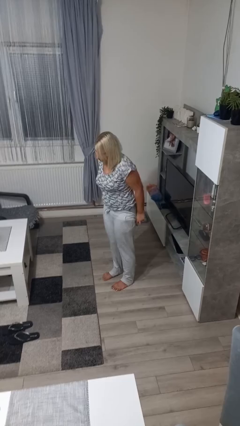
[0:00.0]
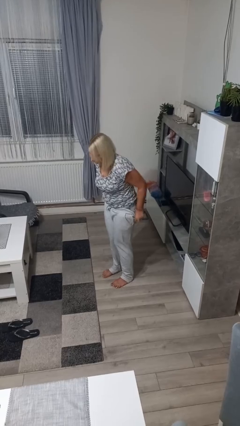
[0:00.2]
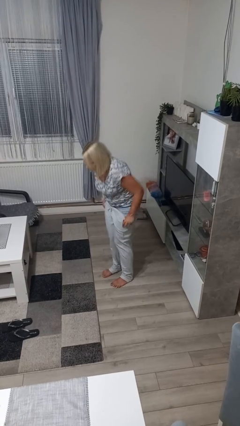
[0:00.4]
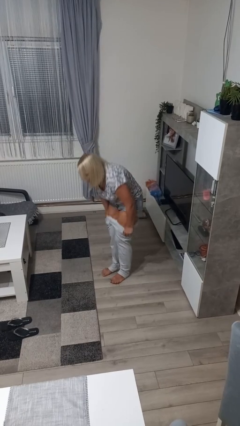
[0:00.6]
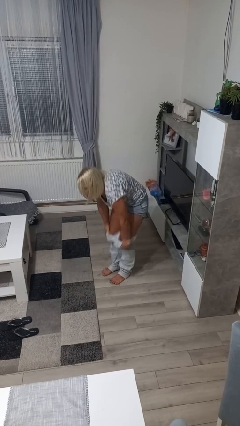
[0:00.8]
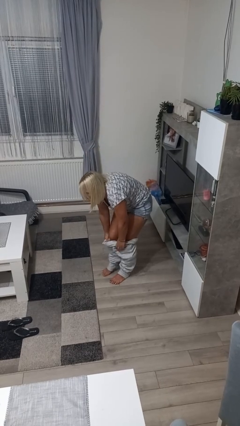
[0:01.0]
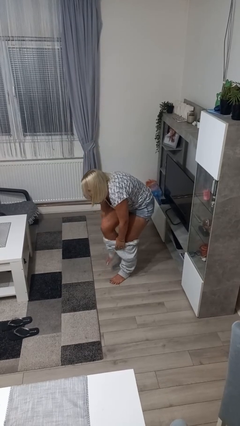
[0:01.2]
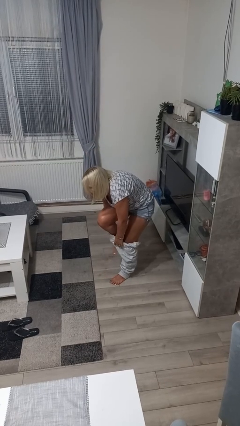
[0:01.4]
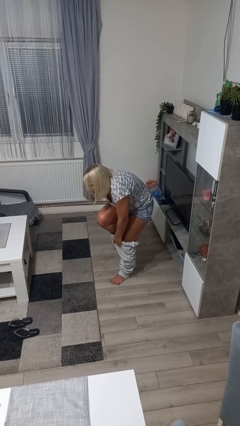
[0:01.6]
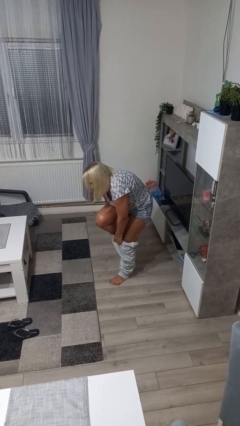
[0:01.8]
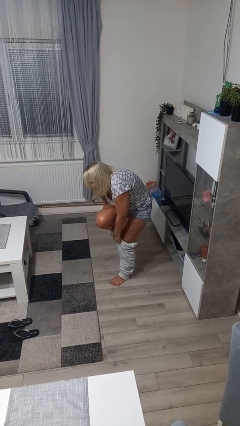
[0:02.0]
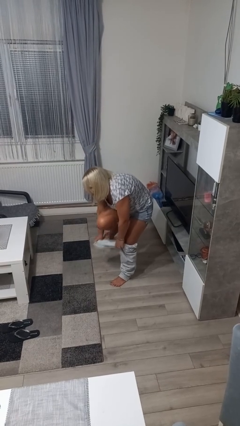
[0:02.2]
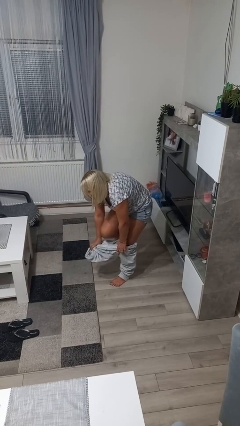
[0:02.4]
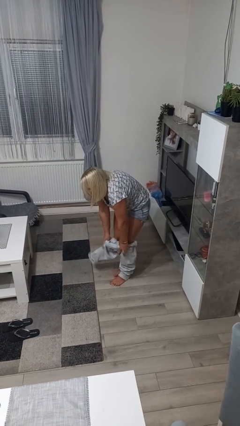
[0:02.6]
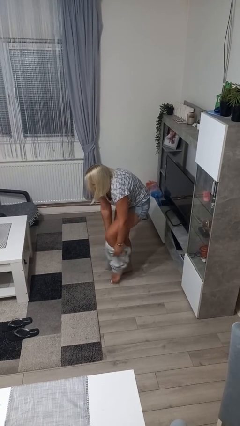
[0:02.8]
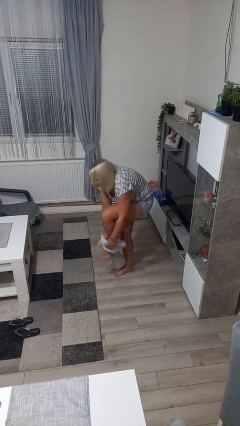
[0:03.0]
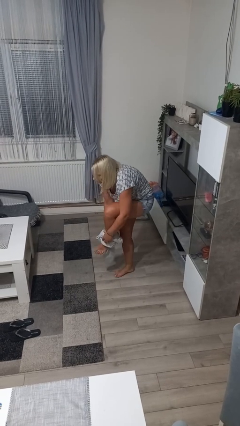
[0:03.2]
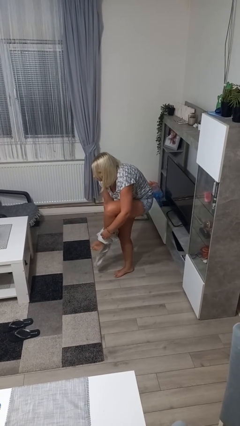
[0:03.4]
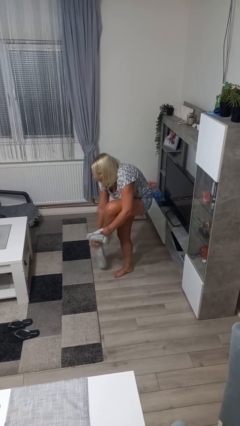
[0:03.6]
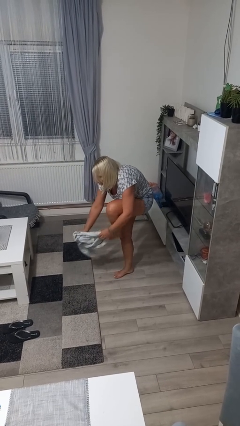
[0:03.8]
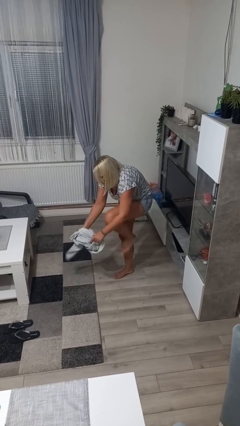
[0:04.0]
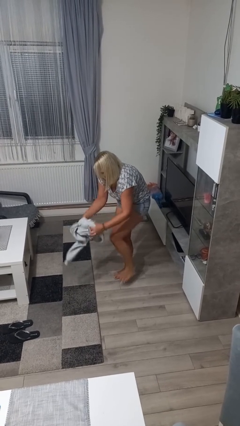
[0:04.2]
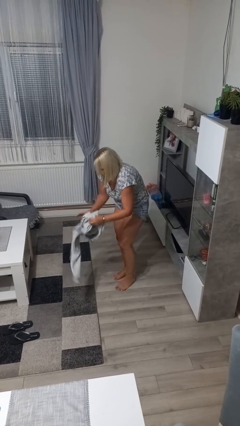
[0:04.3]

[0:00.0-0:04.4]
person takes off pants

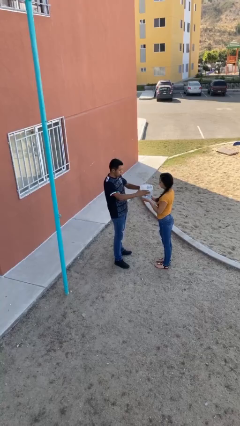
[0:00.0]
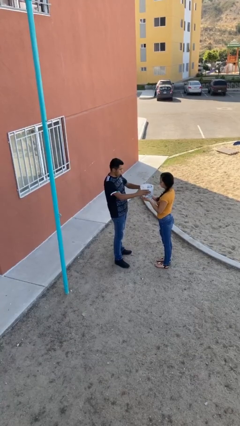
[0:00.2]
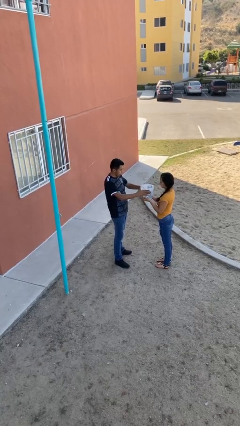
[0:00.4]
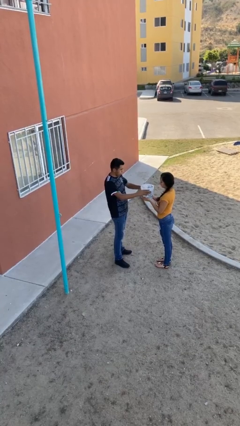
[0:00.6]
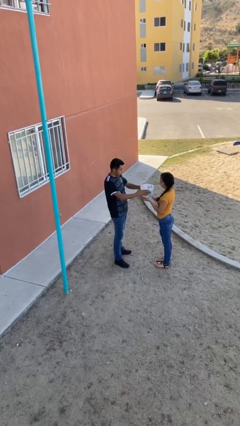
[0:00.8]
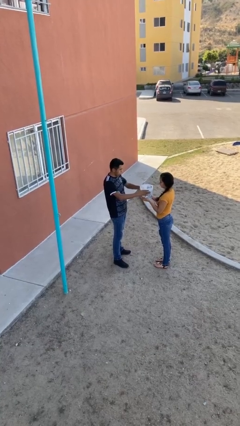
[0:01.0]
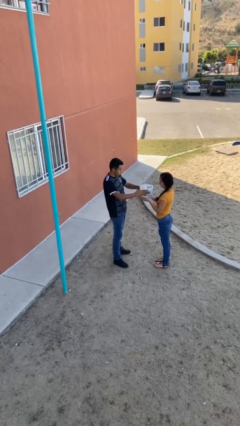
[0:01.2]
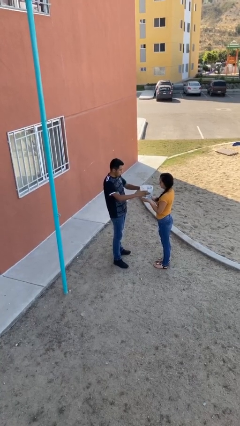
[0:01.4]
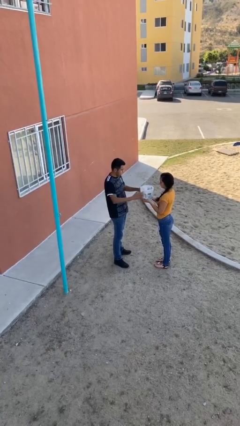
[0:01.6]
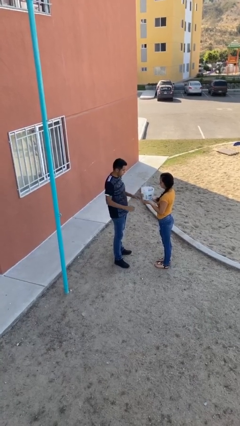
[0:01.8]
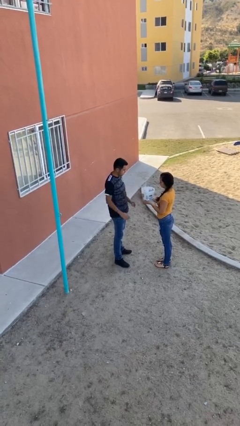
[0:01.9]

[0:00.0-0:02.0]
person transfers object to person

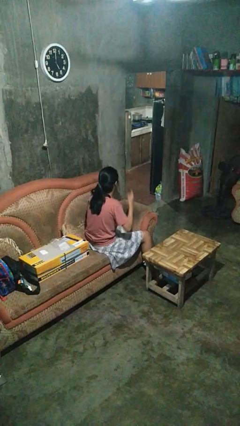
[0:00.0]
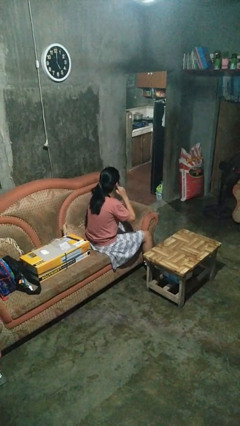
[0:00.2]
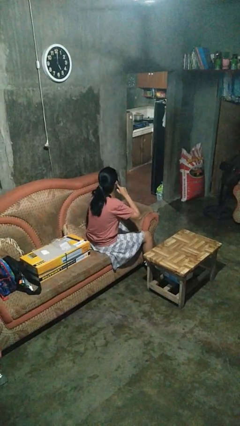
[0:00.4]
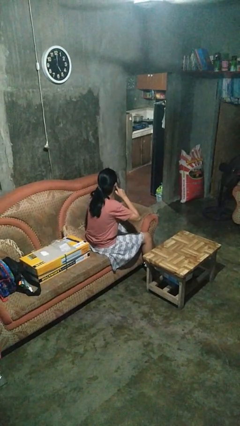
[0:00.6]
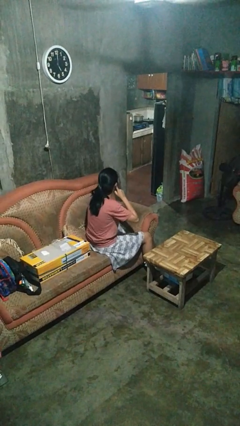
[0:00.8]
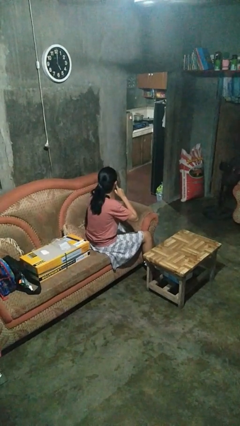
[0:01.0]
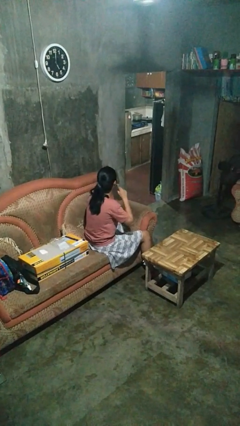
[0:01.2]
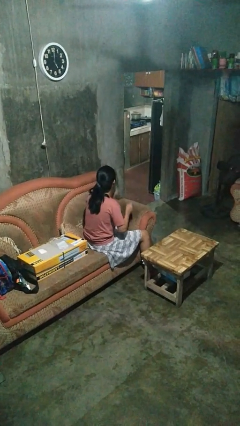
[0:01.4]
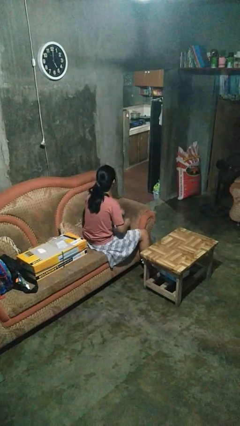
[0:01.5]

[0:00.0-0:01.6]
person puts fingers in ear

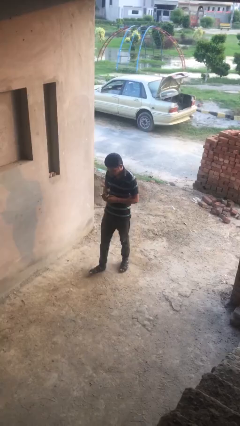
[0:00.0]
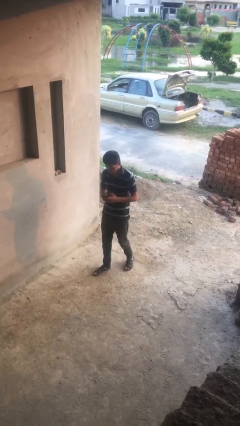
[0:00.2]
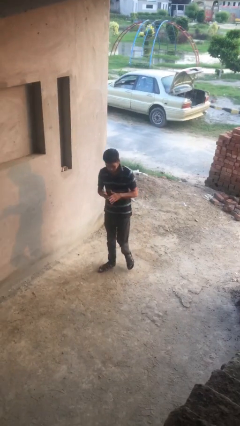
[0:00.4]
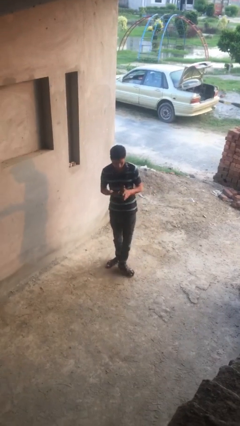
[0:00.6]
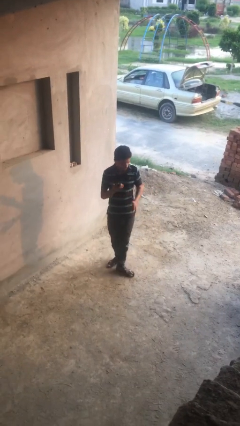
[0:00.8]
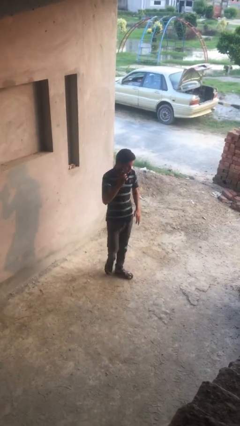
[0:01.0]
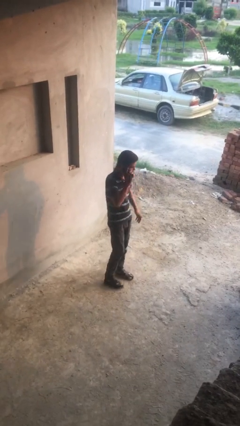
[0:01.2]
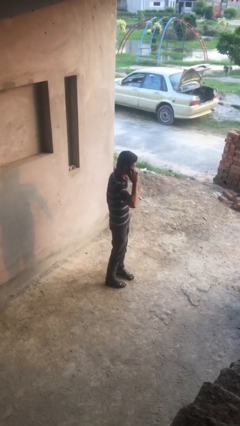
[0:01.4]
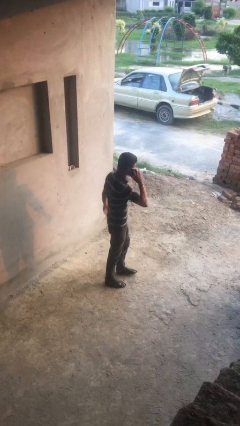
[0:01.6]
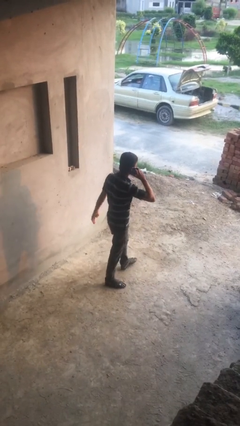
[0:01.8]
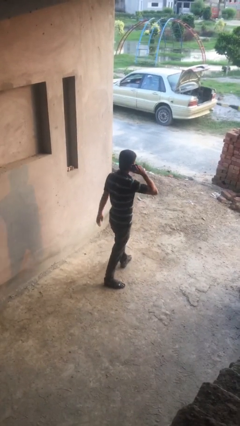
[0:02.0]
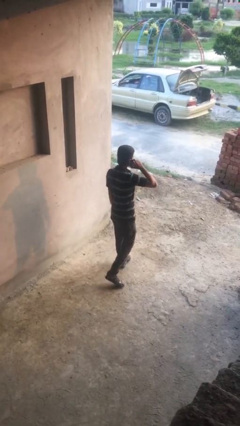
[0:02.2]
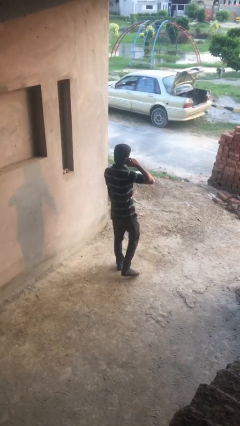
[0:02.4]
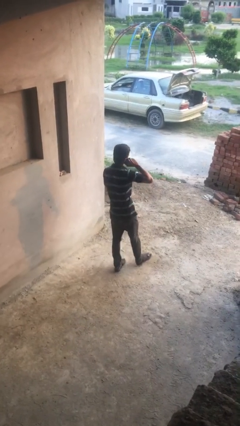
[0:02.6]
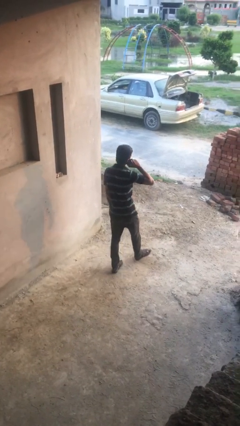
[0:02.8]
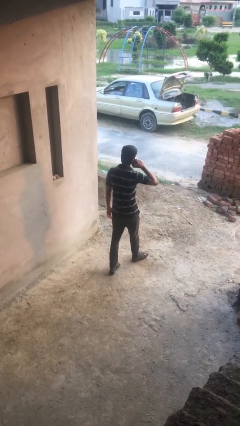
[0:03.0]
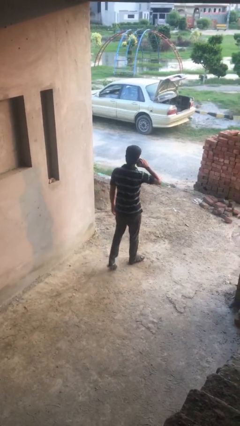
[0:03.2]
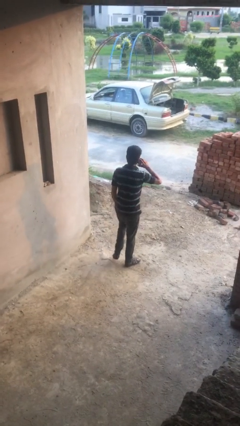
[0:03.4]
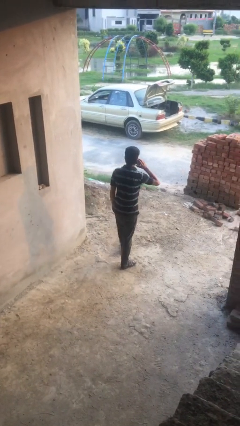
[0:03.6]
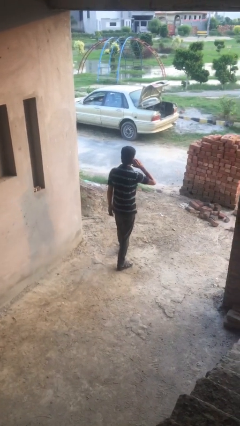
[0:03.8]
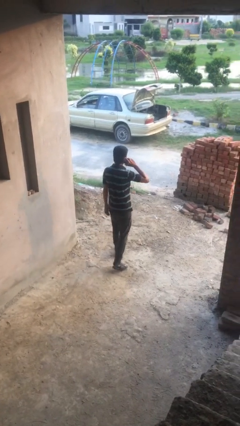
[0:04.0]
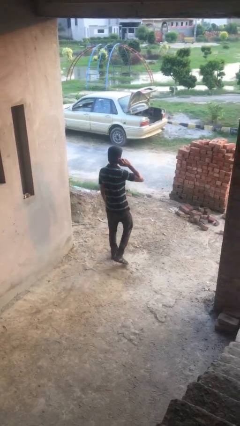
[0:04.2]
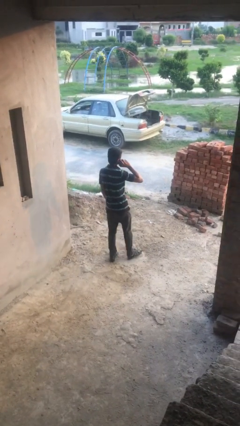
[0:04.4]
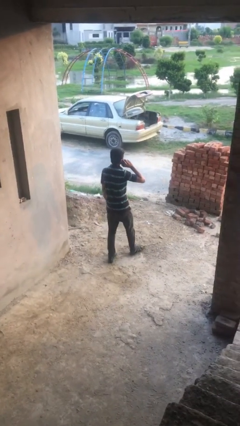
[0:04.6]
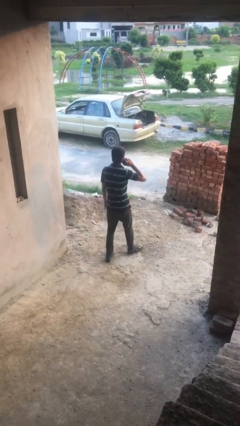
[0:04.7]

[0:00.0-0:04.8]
person talks on phone

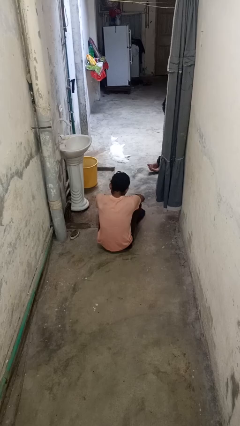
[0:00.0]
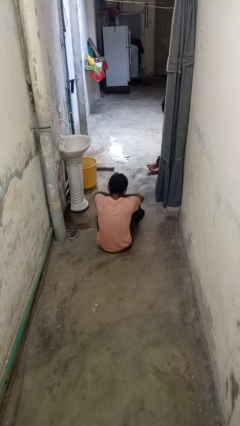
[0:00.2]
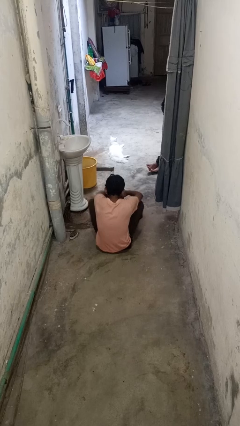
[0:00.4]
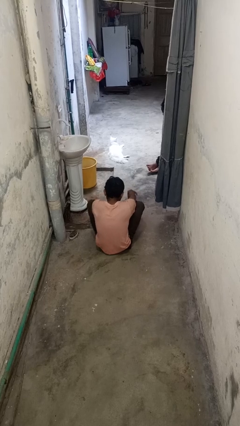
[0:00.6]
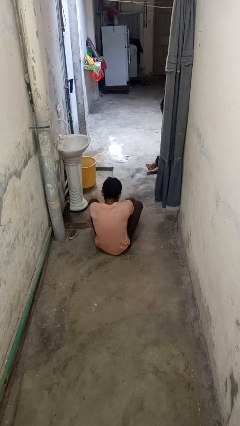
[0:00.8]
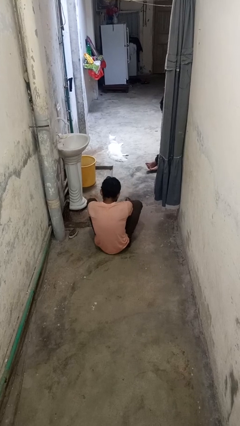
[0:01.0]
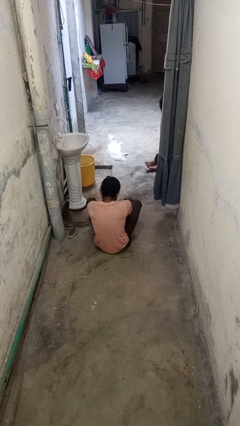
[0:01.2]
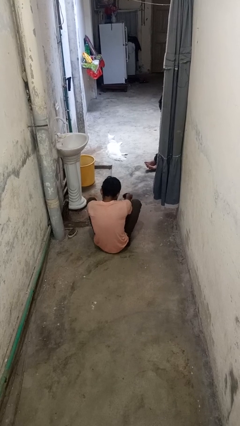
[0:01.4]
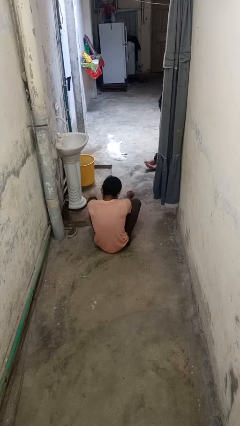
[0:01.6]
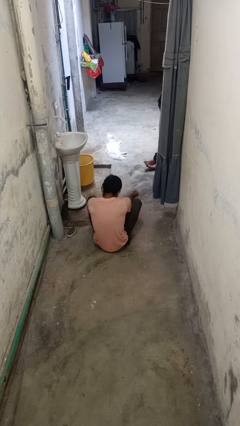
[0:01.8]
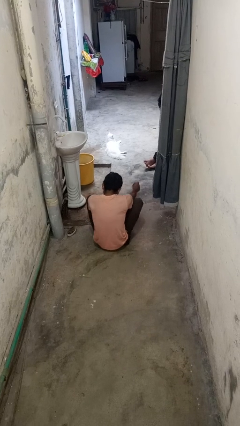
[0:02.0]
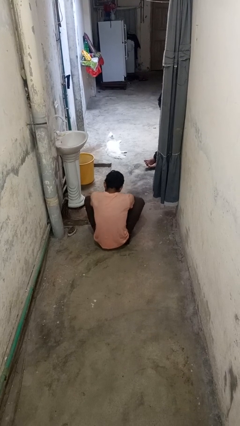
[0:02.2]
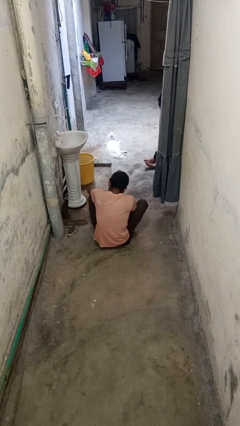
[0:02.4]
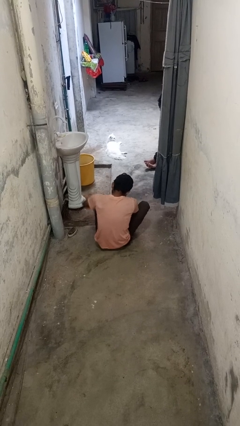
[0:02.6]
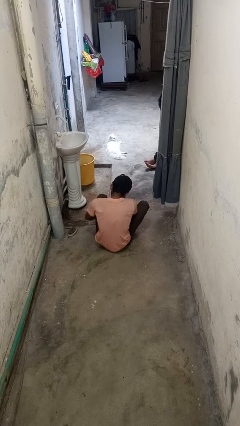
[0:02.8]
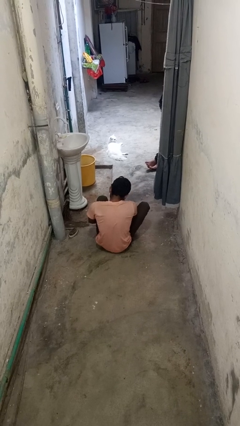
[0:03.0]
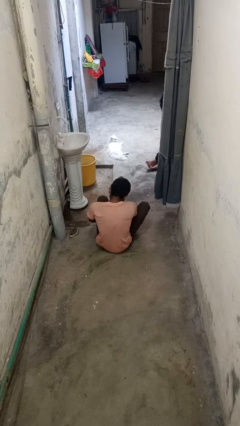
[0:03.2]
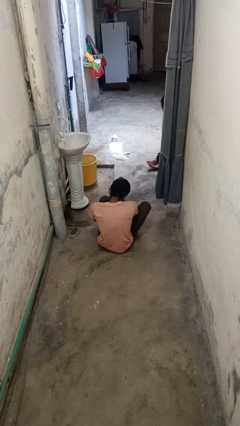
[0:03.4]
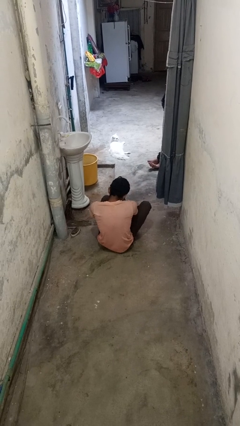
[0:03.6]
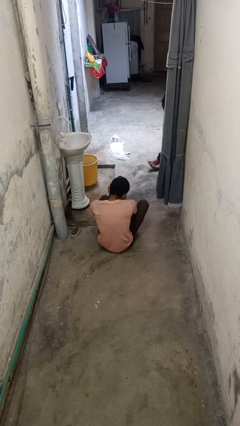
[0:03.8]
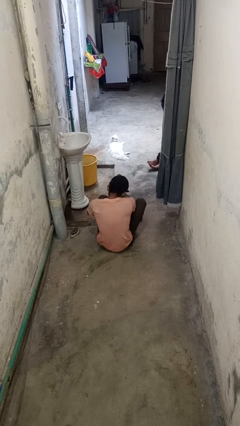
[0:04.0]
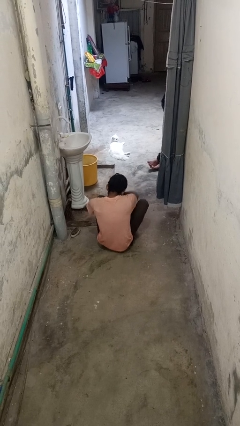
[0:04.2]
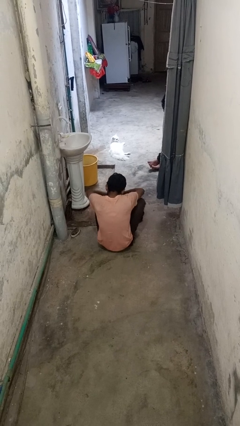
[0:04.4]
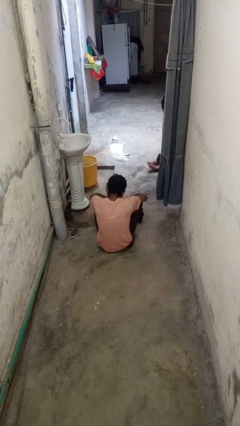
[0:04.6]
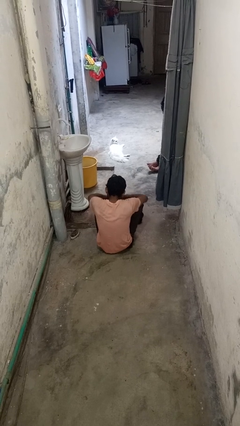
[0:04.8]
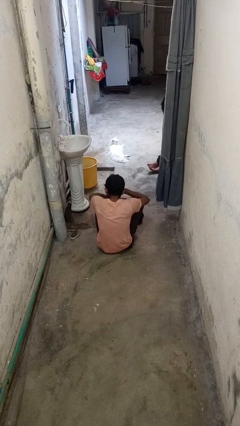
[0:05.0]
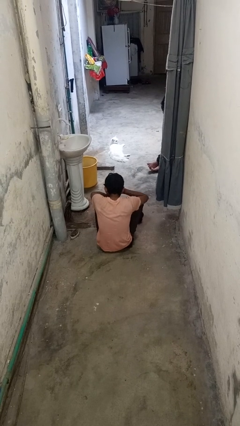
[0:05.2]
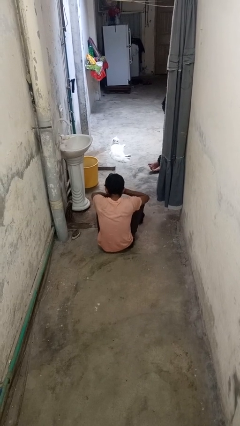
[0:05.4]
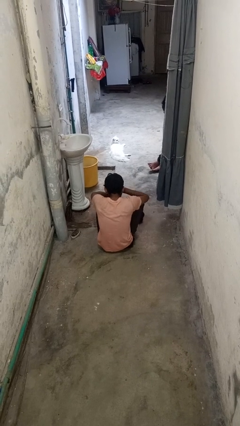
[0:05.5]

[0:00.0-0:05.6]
person takes off socks
